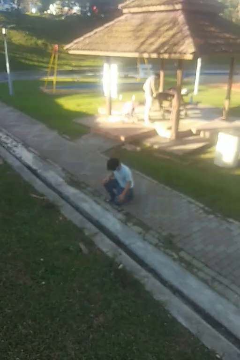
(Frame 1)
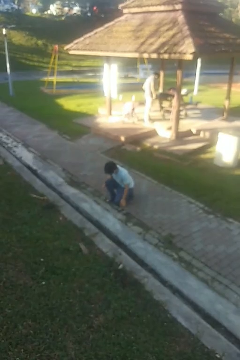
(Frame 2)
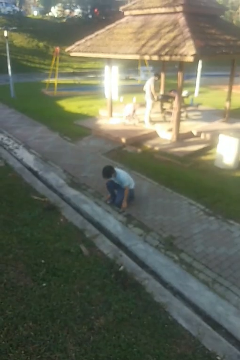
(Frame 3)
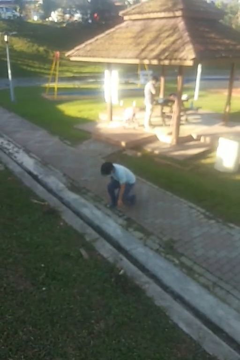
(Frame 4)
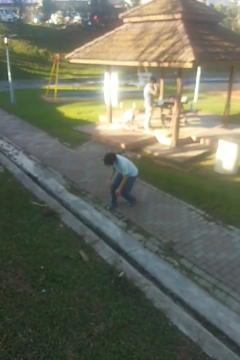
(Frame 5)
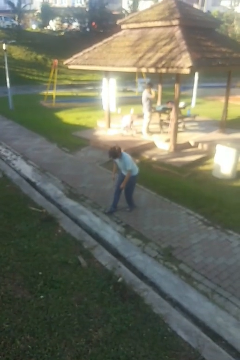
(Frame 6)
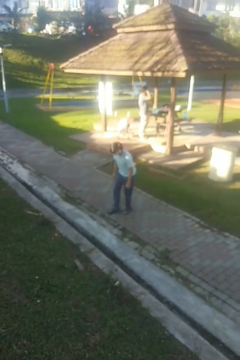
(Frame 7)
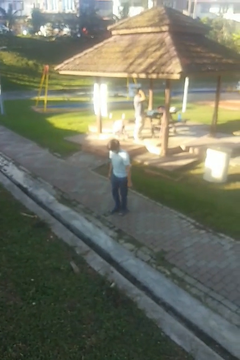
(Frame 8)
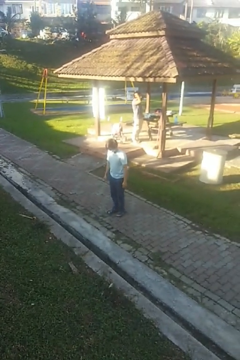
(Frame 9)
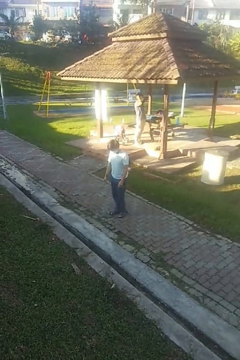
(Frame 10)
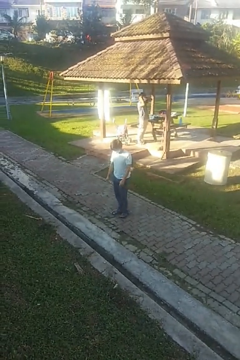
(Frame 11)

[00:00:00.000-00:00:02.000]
person stands up from floor

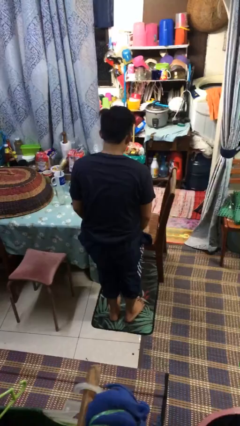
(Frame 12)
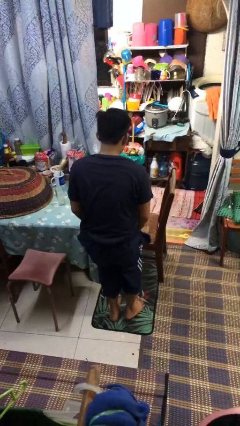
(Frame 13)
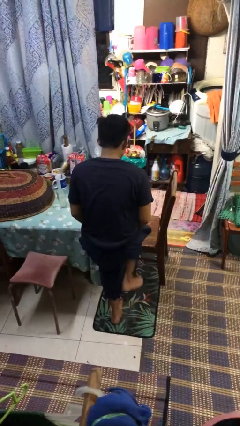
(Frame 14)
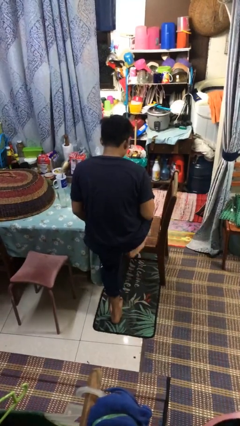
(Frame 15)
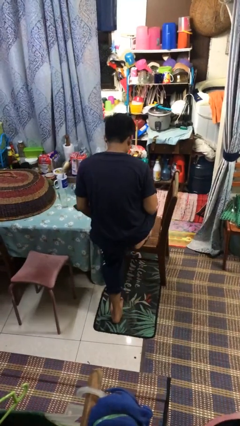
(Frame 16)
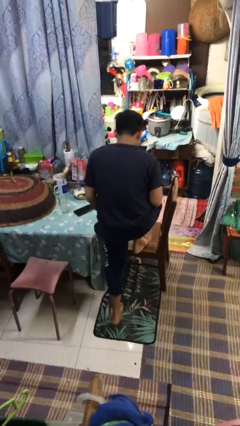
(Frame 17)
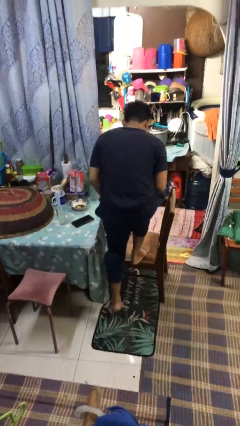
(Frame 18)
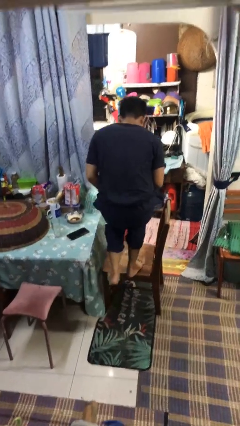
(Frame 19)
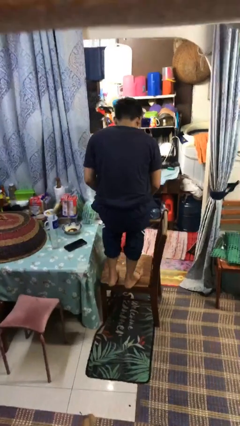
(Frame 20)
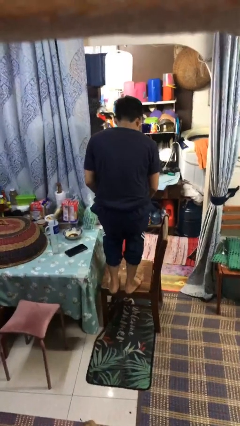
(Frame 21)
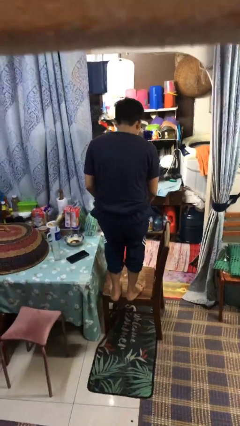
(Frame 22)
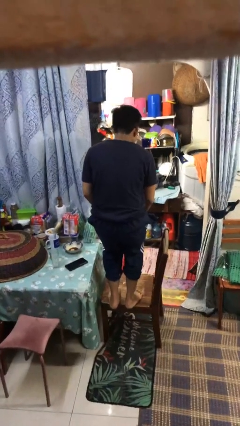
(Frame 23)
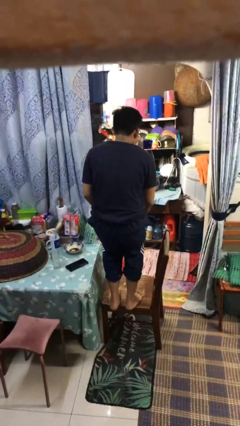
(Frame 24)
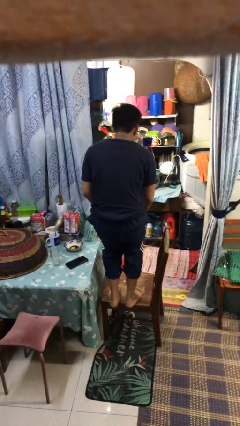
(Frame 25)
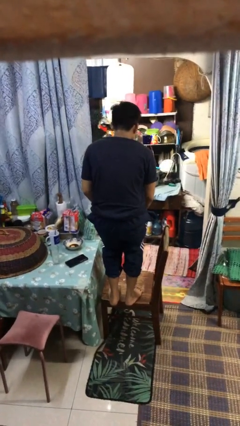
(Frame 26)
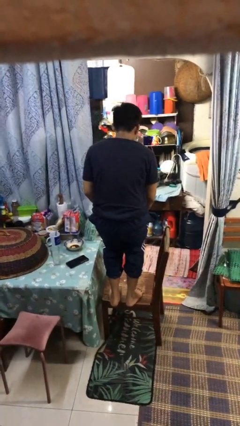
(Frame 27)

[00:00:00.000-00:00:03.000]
person climbs on chair

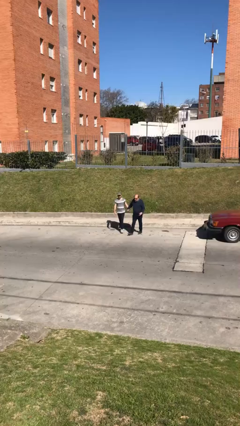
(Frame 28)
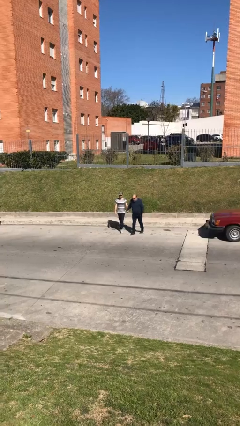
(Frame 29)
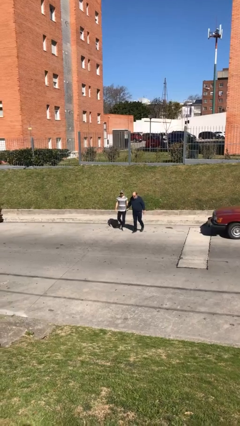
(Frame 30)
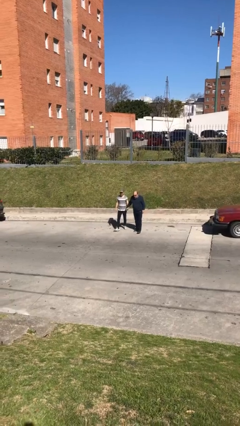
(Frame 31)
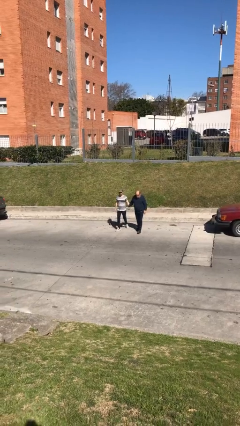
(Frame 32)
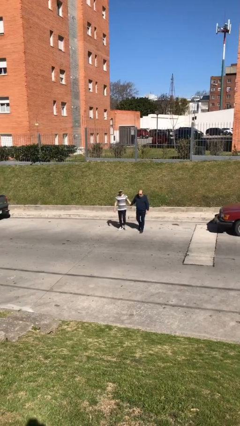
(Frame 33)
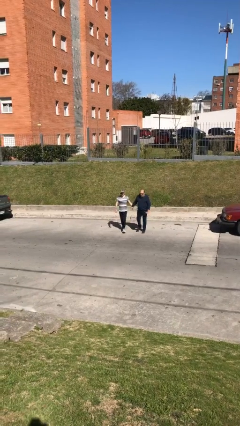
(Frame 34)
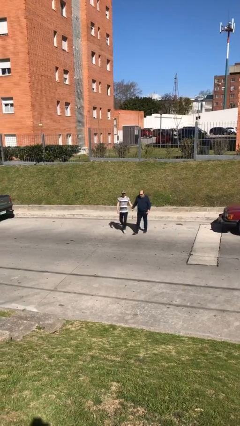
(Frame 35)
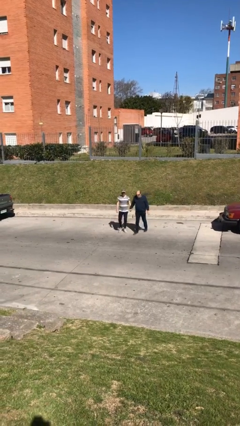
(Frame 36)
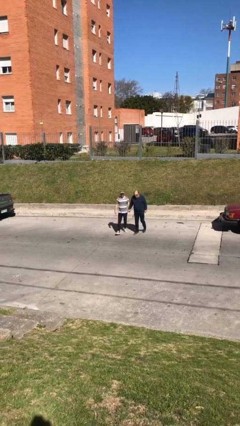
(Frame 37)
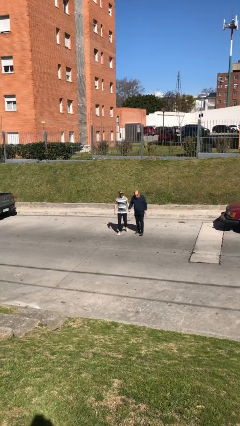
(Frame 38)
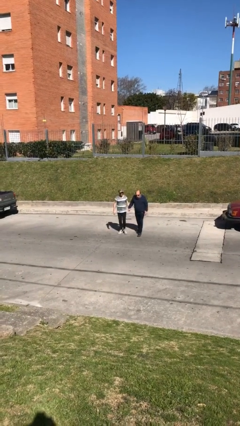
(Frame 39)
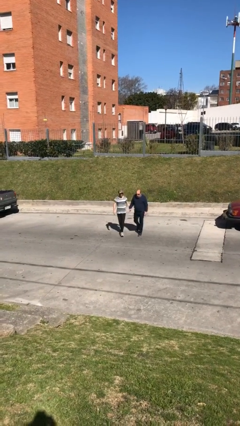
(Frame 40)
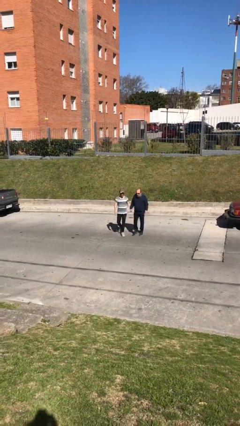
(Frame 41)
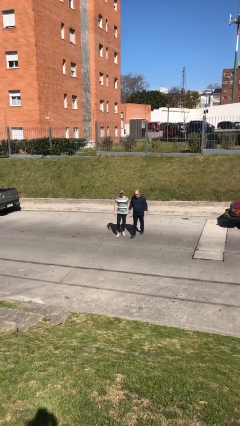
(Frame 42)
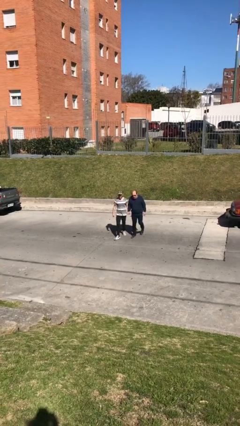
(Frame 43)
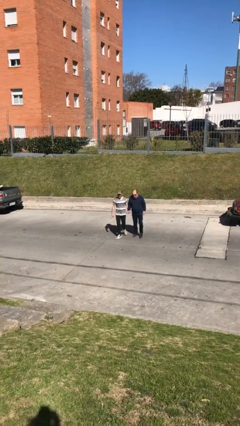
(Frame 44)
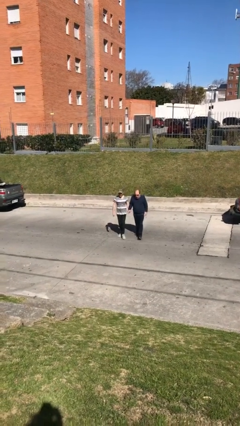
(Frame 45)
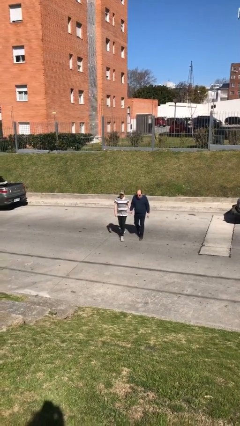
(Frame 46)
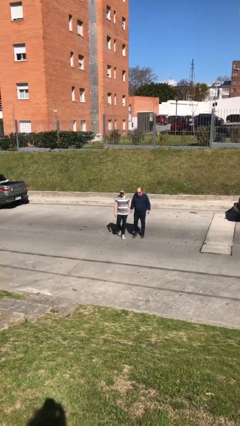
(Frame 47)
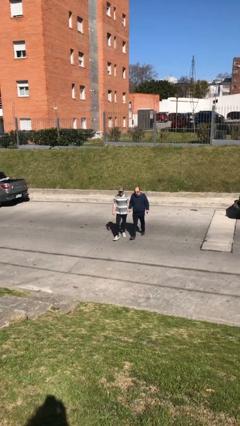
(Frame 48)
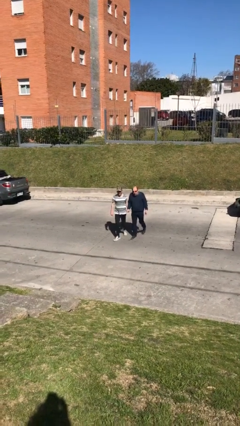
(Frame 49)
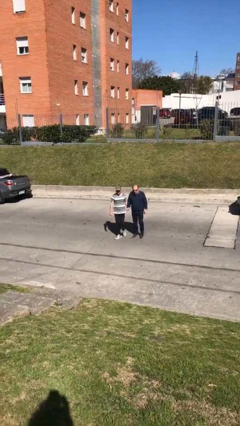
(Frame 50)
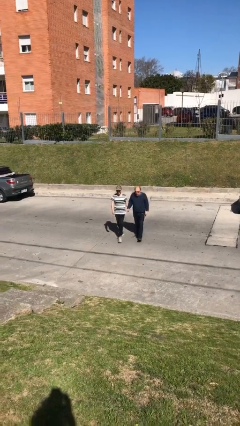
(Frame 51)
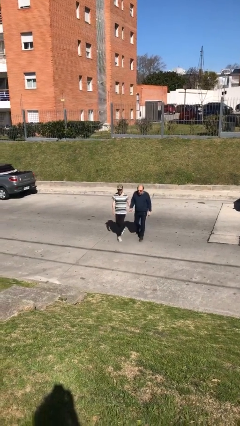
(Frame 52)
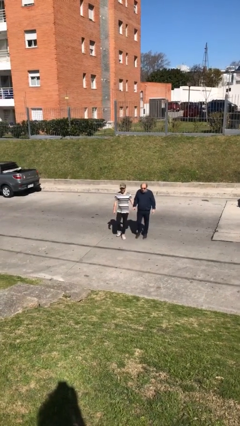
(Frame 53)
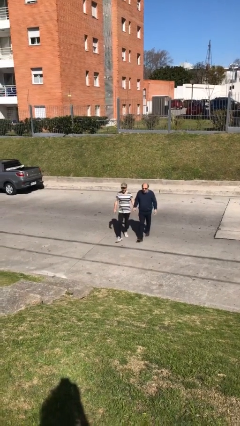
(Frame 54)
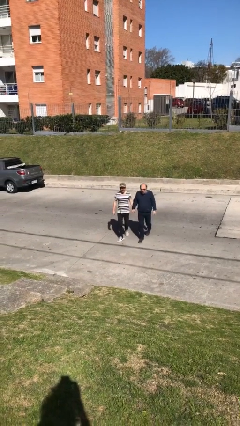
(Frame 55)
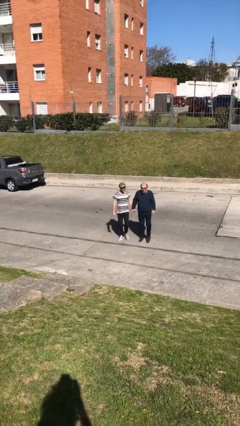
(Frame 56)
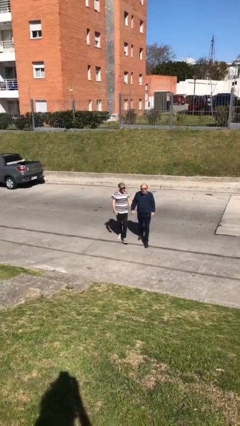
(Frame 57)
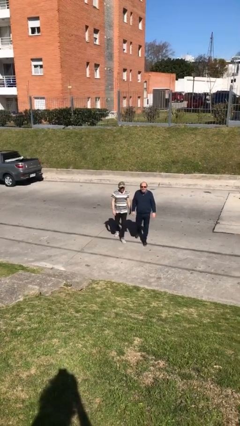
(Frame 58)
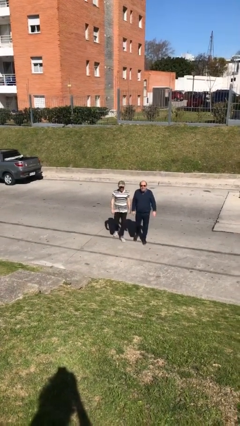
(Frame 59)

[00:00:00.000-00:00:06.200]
person holds hand

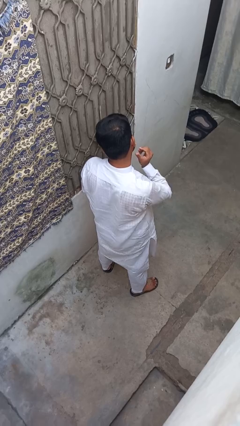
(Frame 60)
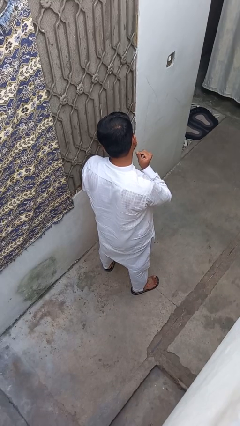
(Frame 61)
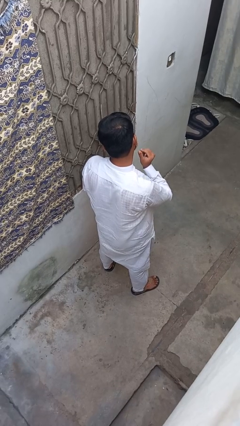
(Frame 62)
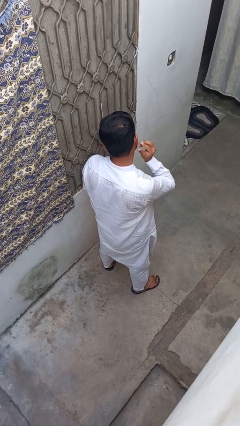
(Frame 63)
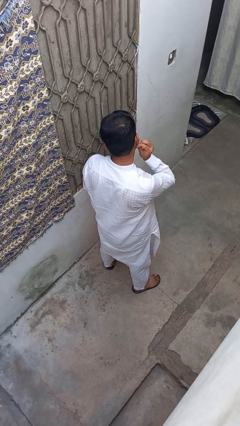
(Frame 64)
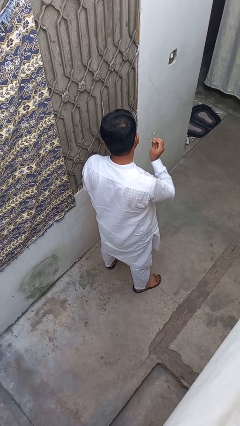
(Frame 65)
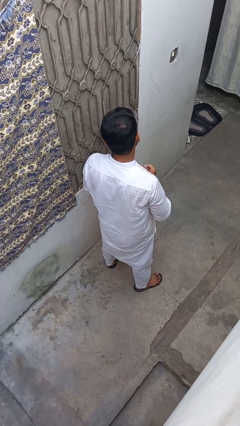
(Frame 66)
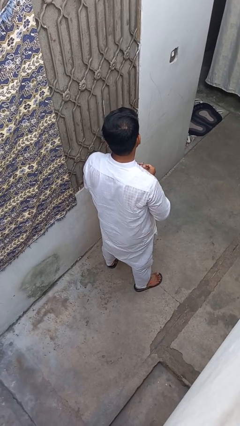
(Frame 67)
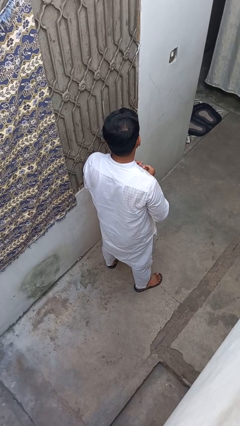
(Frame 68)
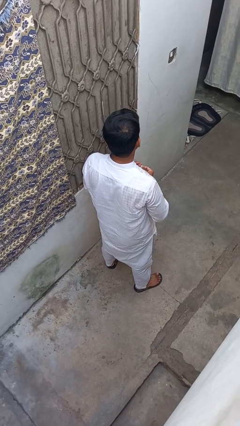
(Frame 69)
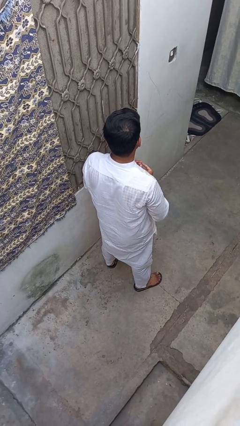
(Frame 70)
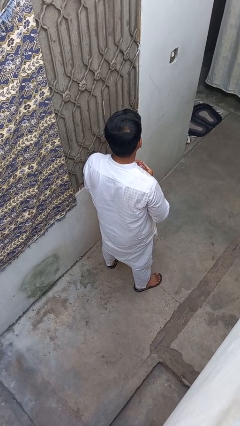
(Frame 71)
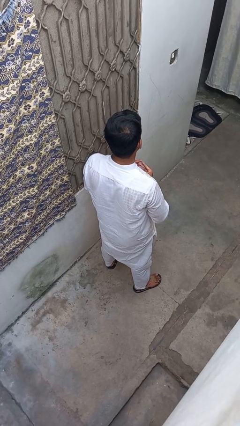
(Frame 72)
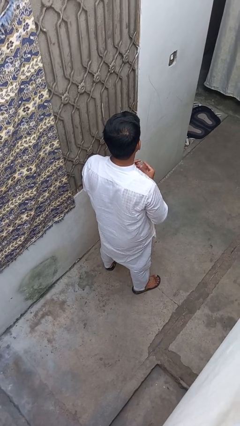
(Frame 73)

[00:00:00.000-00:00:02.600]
person takes off earrings

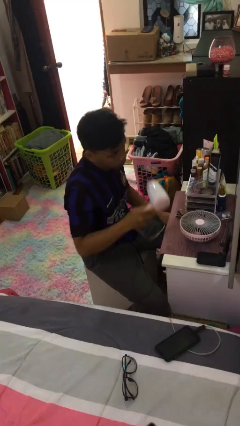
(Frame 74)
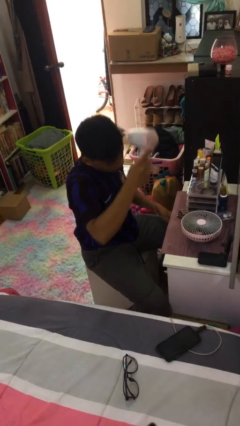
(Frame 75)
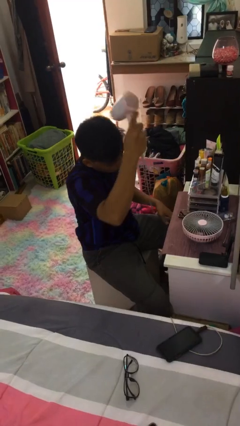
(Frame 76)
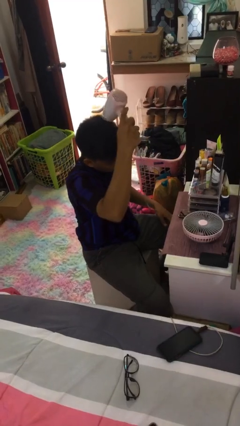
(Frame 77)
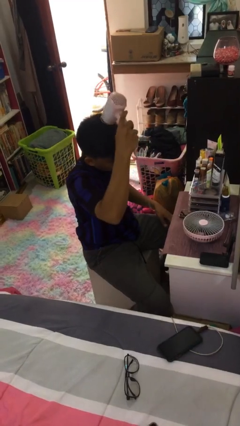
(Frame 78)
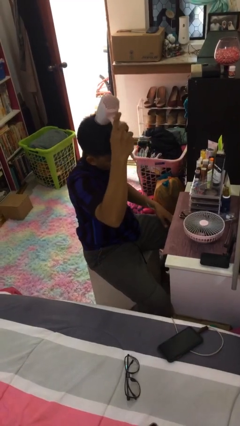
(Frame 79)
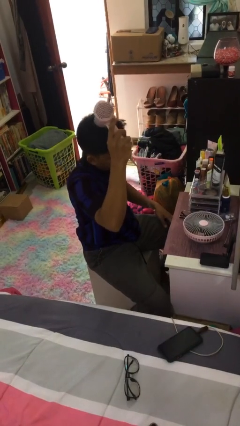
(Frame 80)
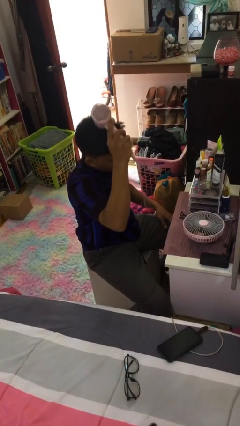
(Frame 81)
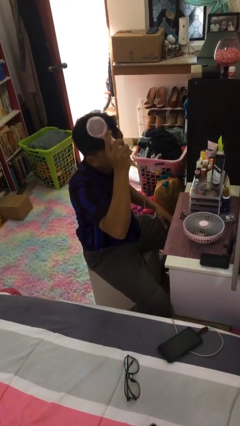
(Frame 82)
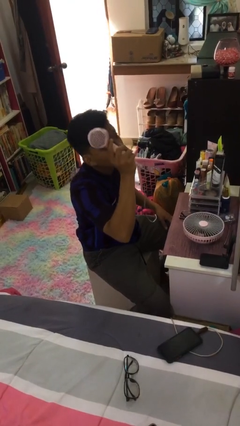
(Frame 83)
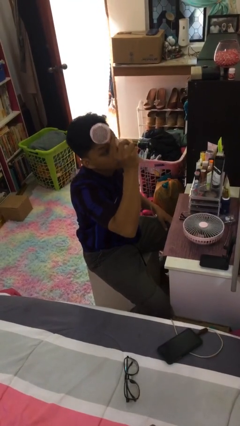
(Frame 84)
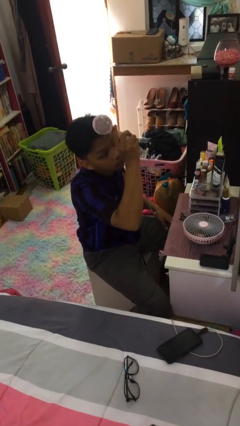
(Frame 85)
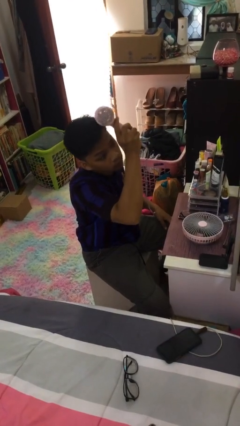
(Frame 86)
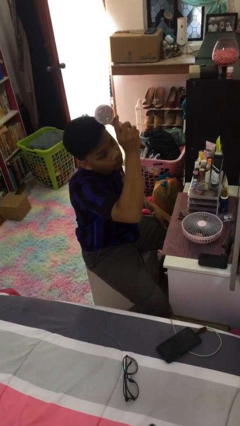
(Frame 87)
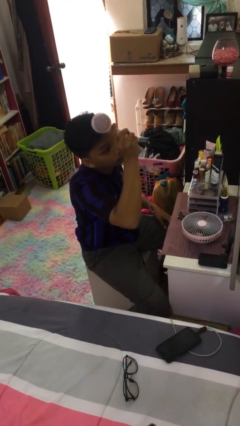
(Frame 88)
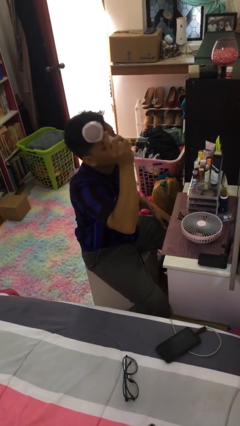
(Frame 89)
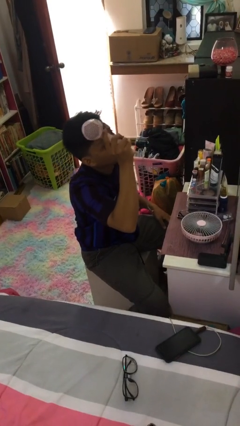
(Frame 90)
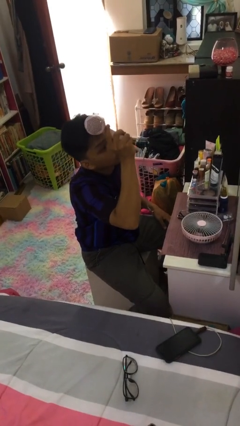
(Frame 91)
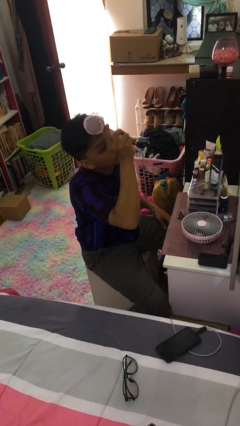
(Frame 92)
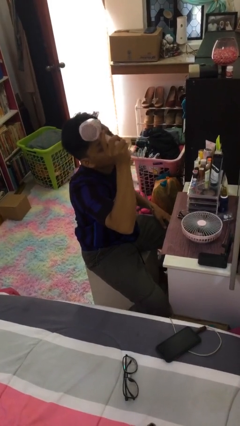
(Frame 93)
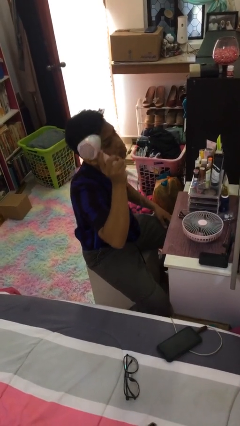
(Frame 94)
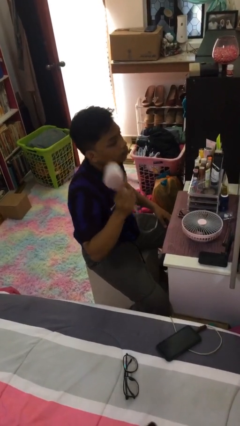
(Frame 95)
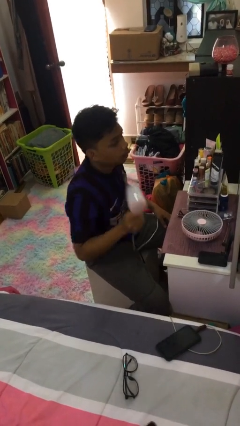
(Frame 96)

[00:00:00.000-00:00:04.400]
person dries hair with hairdryer
